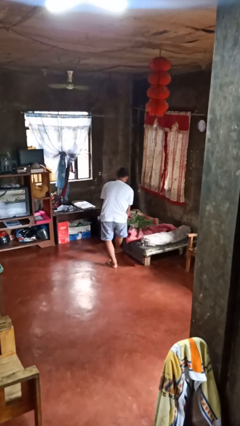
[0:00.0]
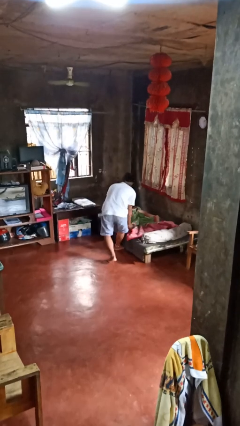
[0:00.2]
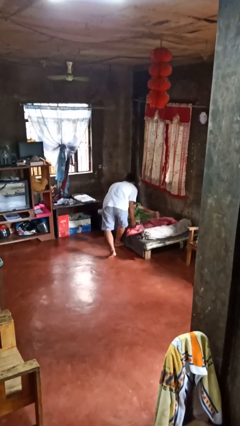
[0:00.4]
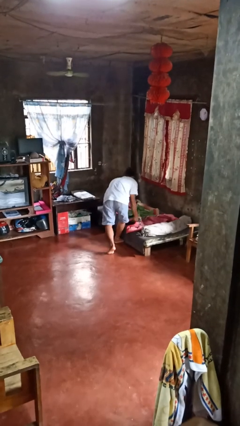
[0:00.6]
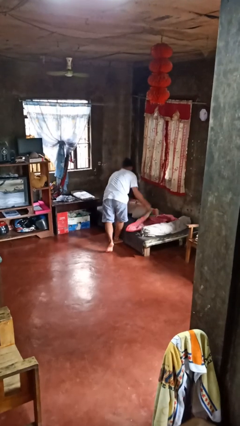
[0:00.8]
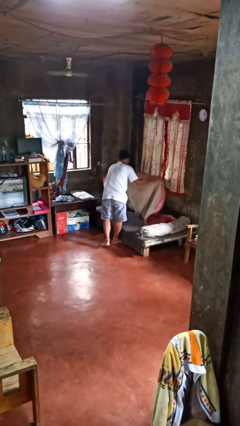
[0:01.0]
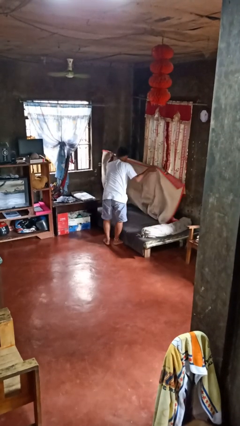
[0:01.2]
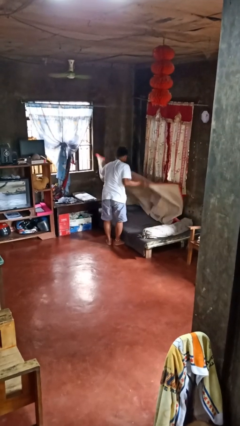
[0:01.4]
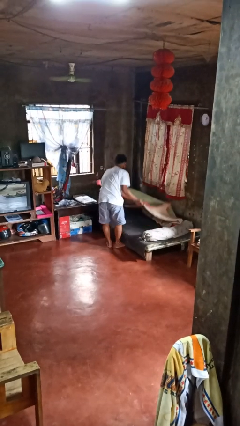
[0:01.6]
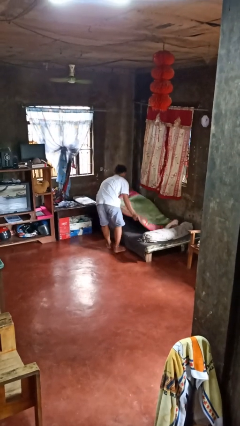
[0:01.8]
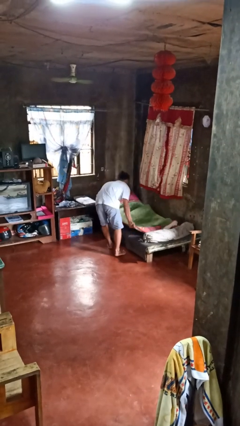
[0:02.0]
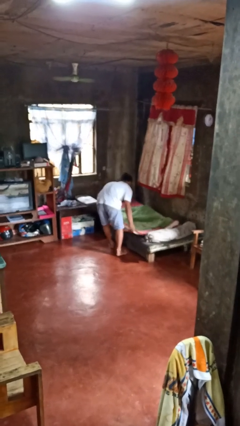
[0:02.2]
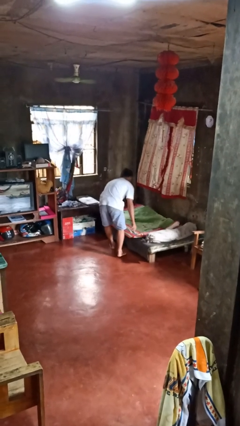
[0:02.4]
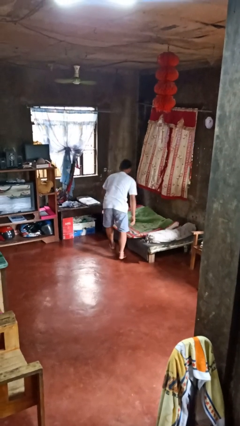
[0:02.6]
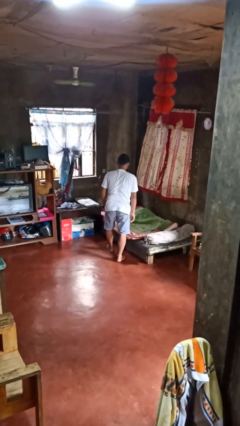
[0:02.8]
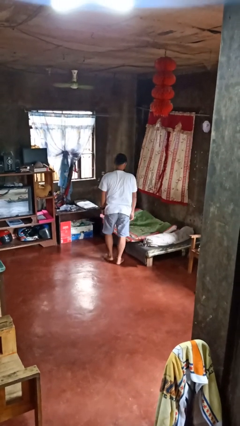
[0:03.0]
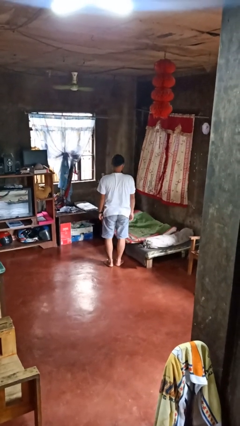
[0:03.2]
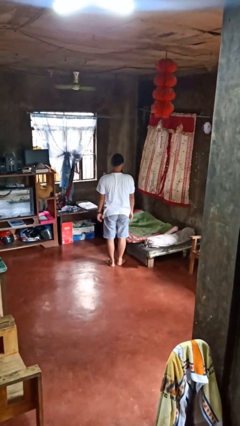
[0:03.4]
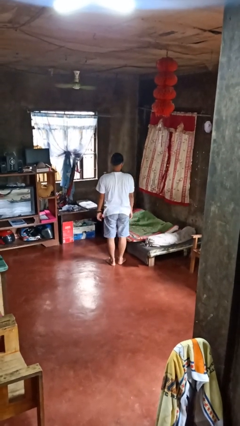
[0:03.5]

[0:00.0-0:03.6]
person makes bed

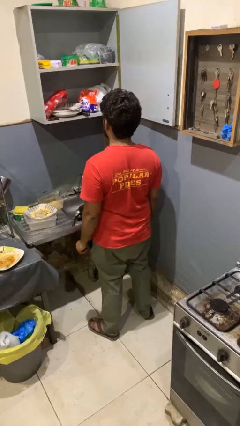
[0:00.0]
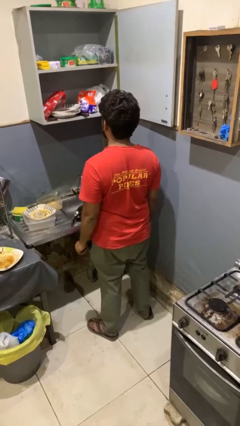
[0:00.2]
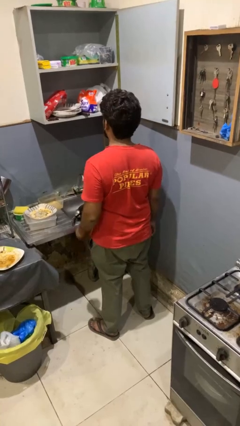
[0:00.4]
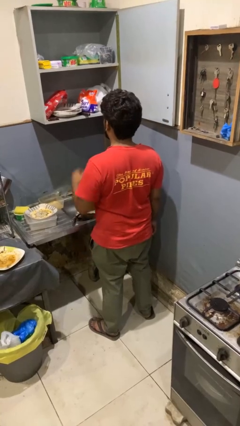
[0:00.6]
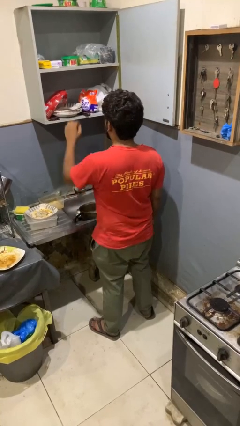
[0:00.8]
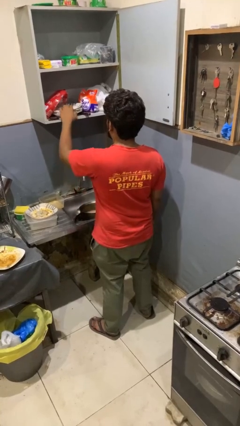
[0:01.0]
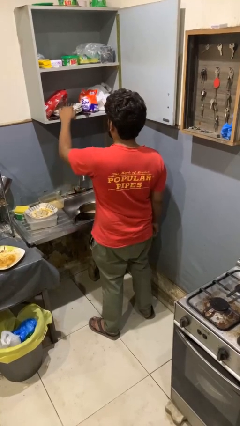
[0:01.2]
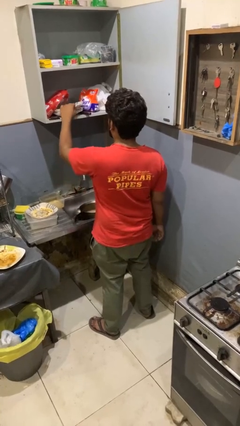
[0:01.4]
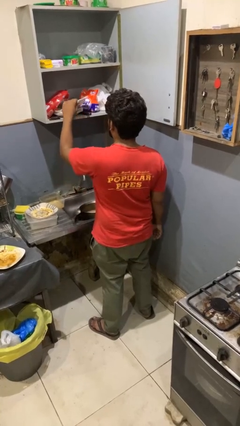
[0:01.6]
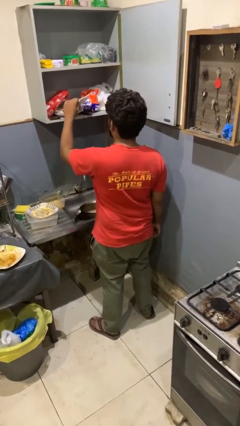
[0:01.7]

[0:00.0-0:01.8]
person takes object from cabinet

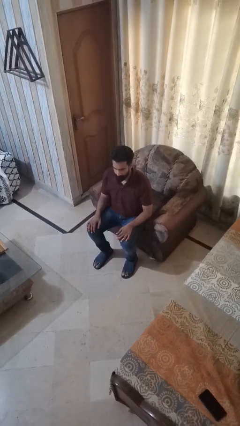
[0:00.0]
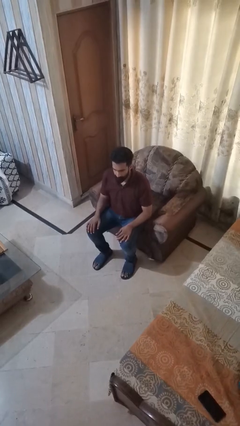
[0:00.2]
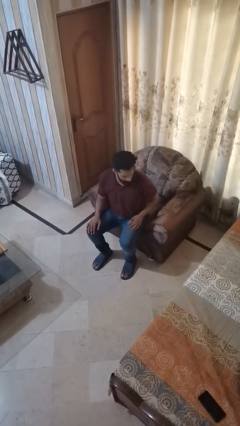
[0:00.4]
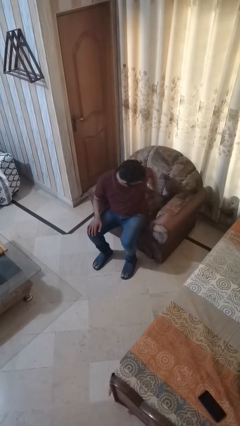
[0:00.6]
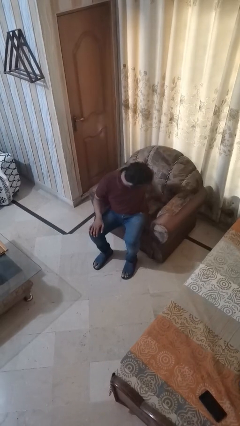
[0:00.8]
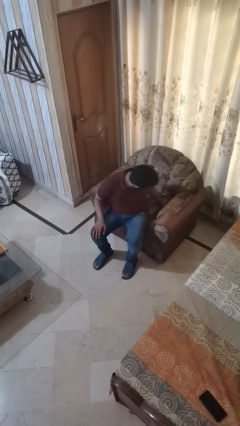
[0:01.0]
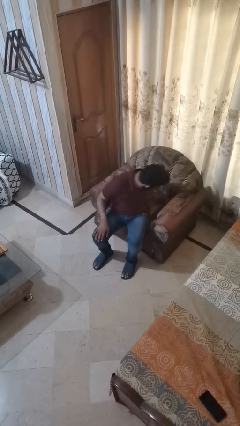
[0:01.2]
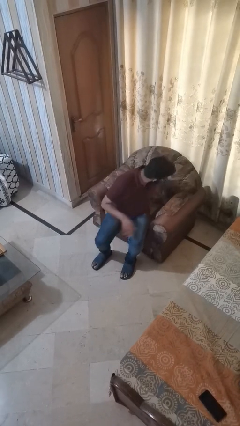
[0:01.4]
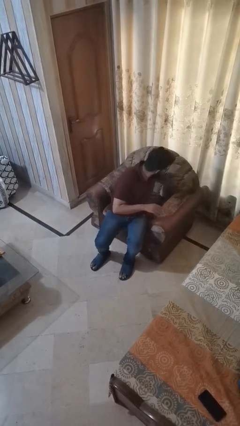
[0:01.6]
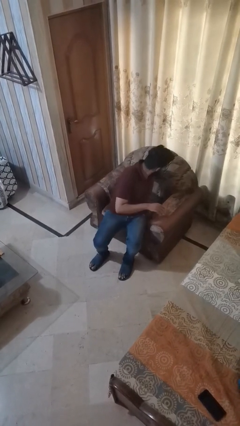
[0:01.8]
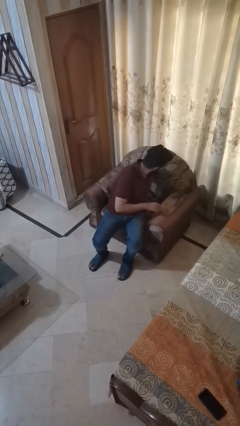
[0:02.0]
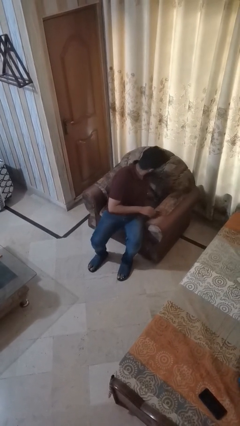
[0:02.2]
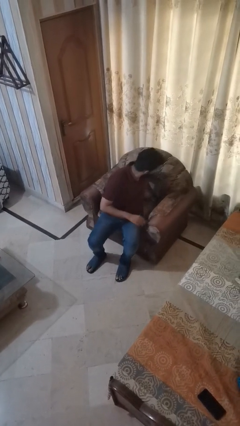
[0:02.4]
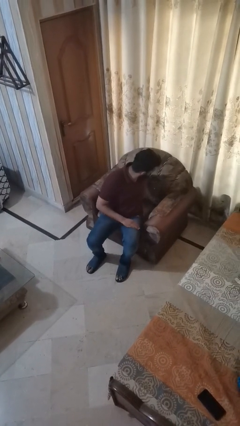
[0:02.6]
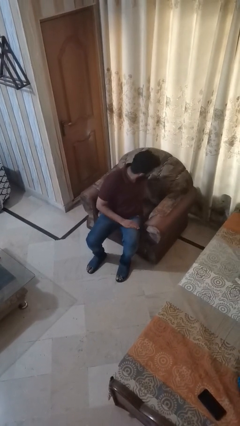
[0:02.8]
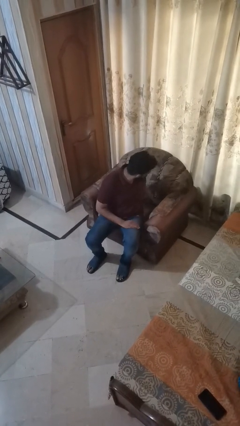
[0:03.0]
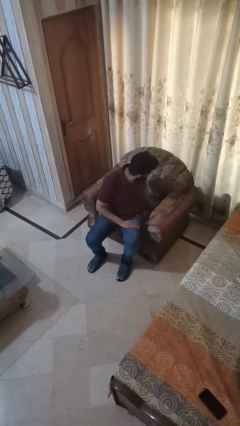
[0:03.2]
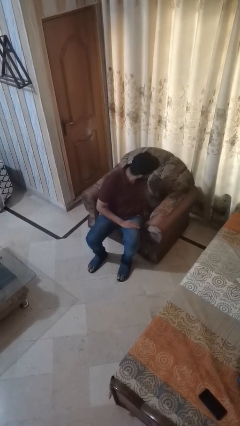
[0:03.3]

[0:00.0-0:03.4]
person searches under couch

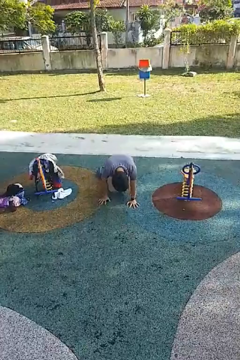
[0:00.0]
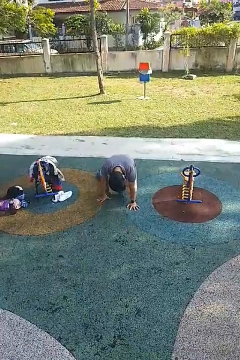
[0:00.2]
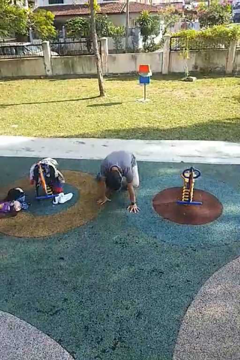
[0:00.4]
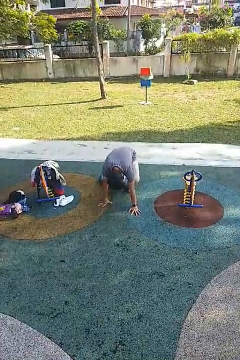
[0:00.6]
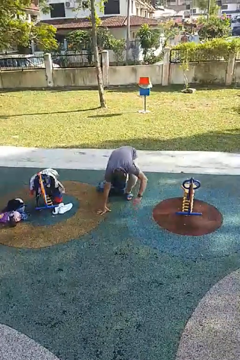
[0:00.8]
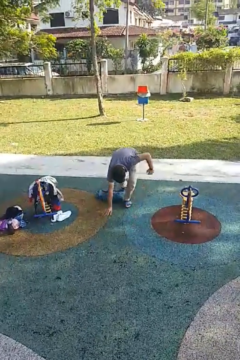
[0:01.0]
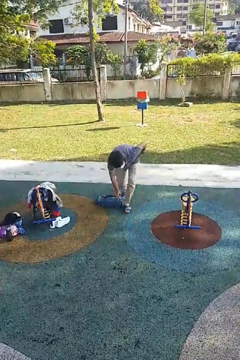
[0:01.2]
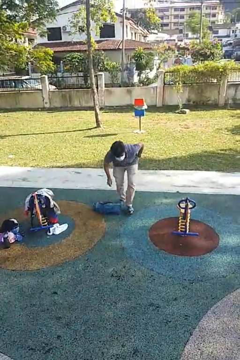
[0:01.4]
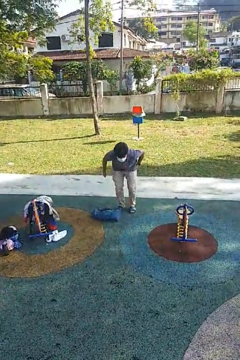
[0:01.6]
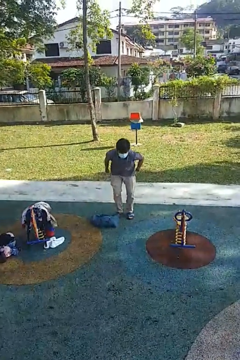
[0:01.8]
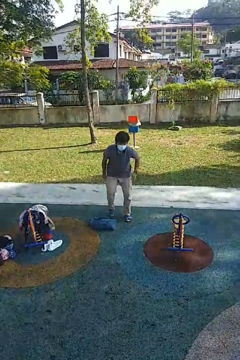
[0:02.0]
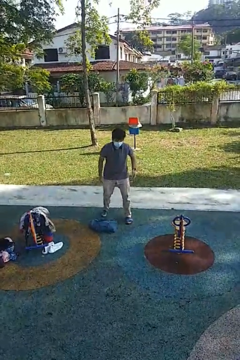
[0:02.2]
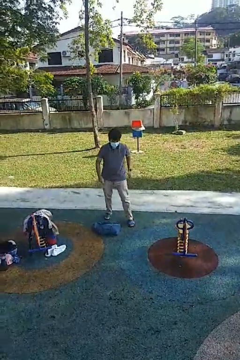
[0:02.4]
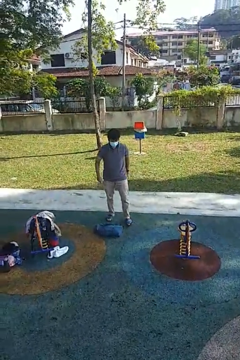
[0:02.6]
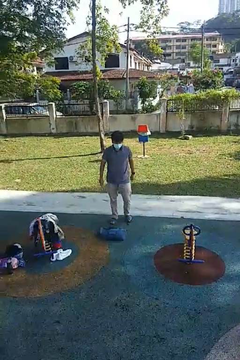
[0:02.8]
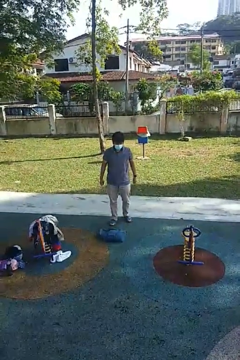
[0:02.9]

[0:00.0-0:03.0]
person stands up from floor

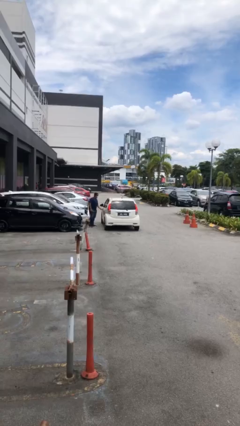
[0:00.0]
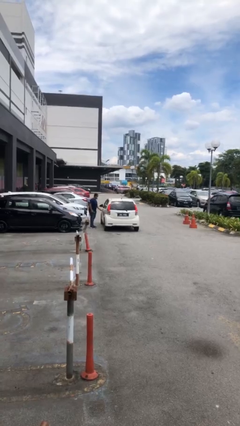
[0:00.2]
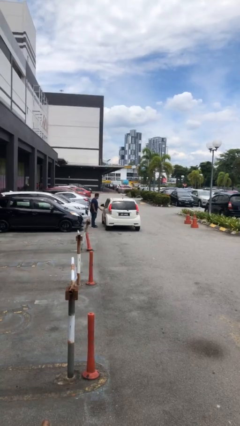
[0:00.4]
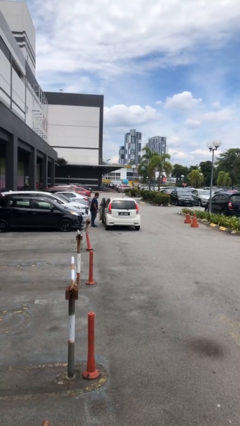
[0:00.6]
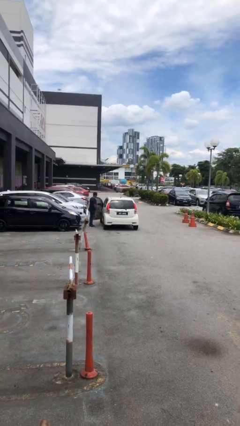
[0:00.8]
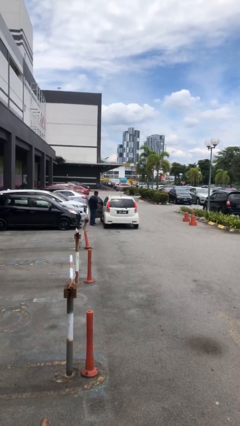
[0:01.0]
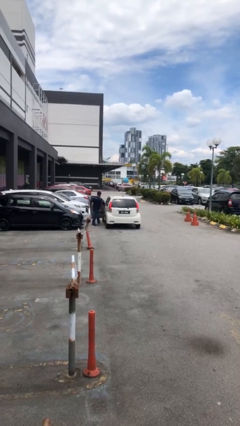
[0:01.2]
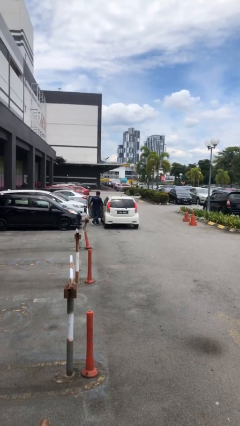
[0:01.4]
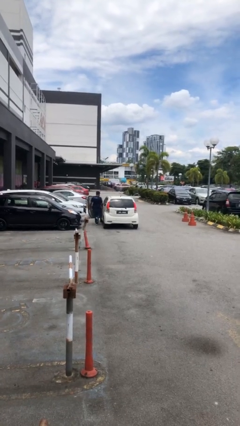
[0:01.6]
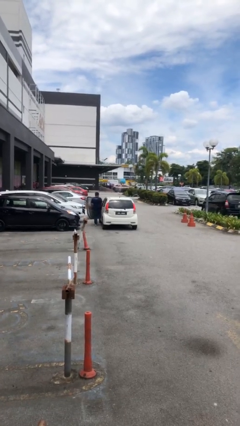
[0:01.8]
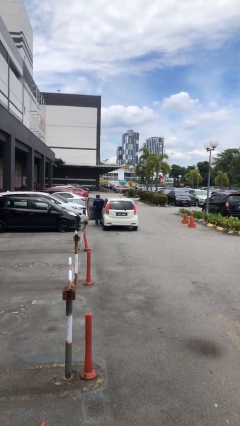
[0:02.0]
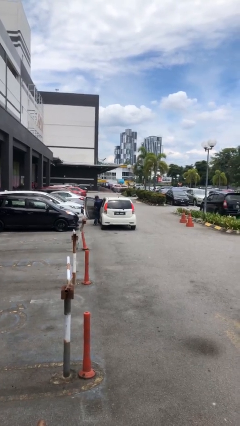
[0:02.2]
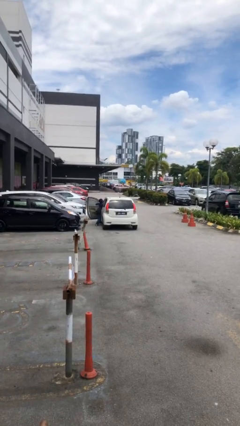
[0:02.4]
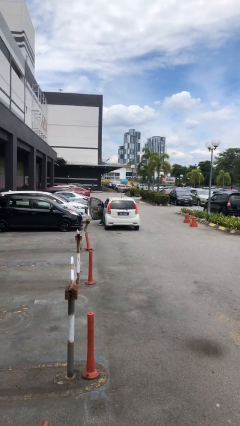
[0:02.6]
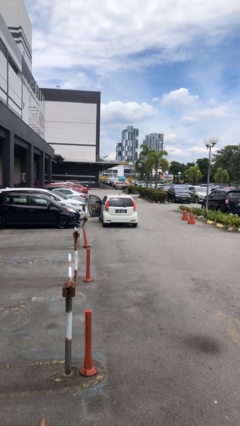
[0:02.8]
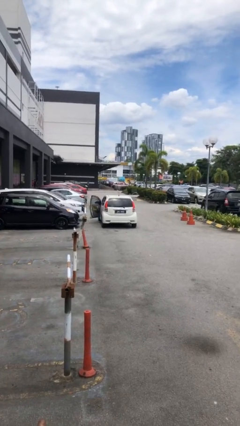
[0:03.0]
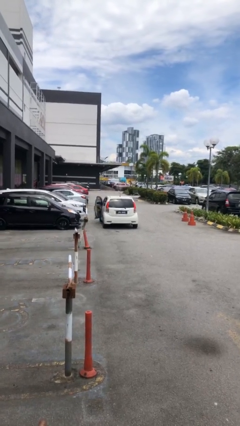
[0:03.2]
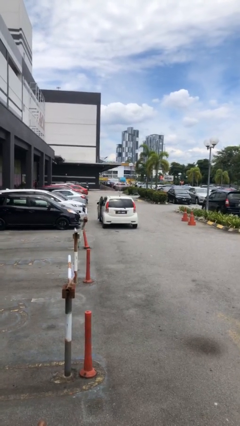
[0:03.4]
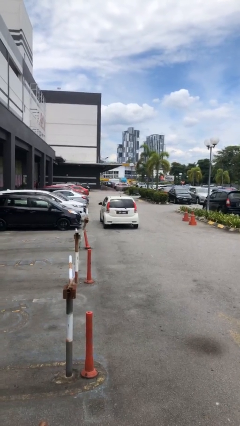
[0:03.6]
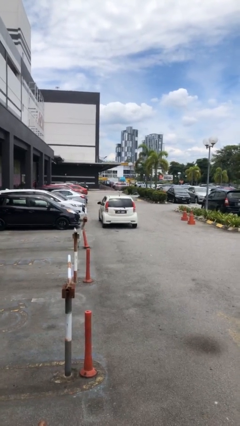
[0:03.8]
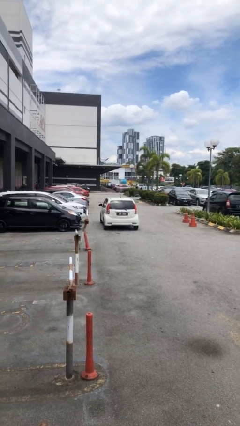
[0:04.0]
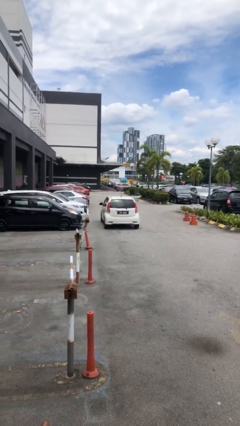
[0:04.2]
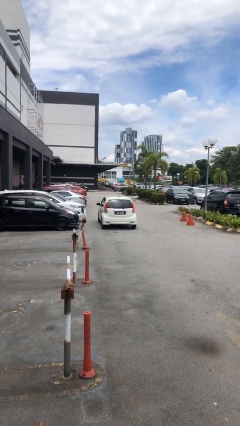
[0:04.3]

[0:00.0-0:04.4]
car picks up person

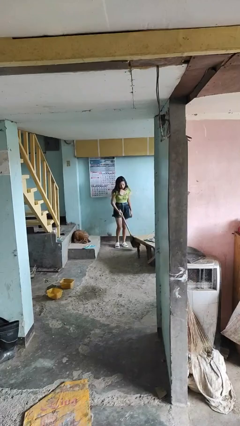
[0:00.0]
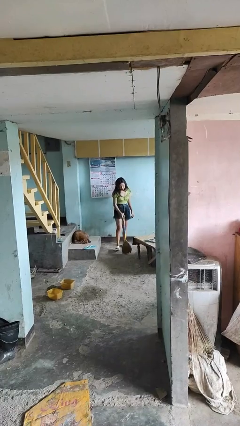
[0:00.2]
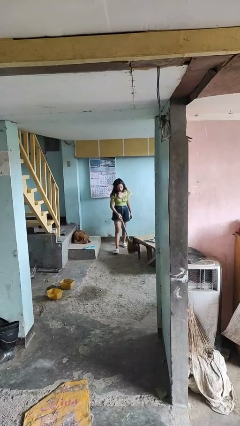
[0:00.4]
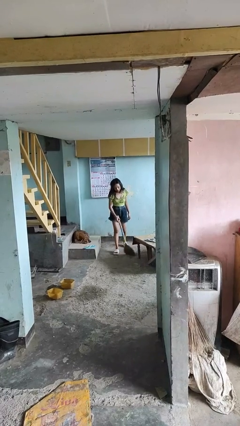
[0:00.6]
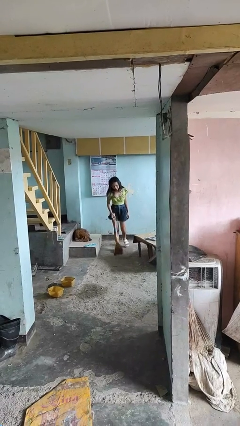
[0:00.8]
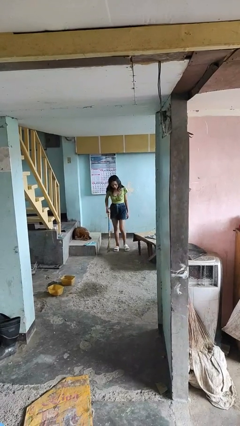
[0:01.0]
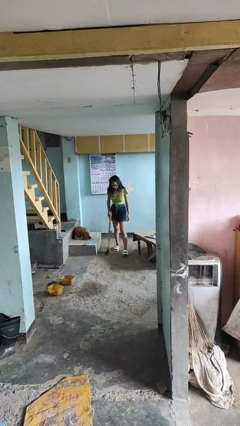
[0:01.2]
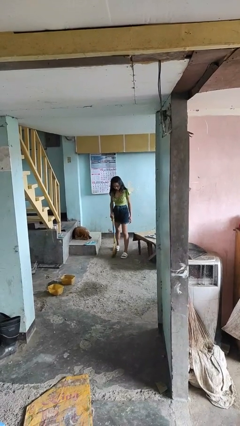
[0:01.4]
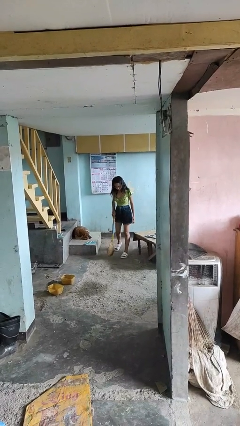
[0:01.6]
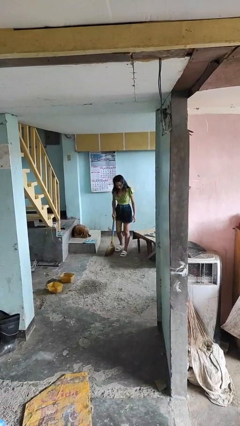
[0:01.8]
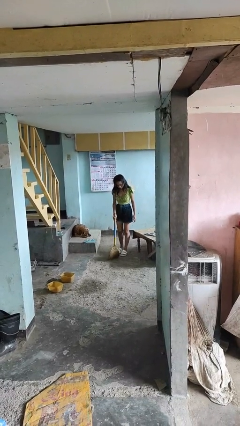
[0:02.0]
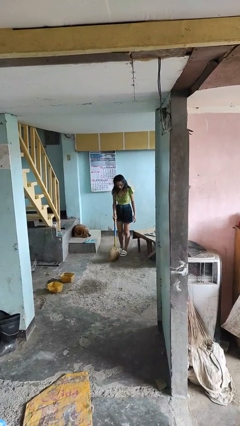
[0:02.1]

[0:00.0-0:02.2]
person sweeps floor
